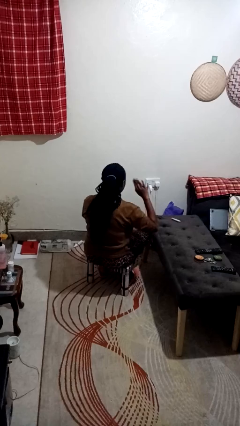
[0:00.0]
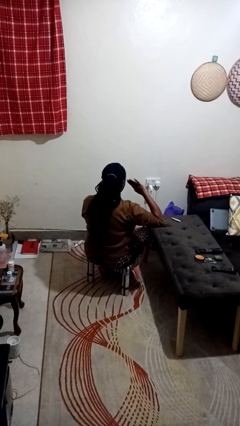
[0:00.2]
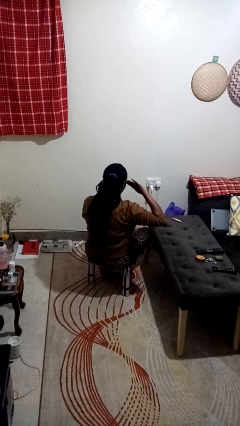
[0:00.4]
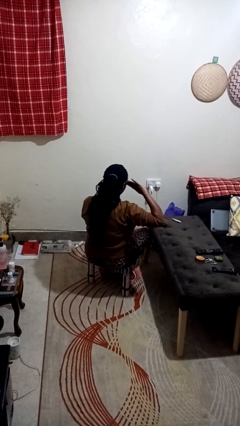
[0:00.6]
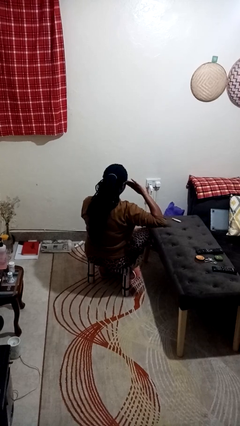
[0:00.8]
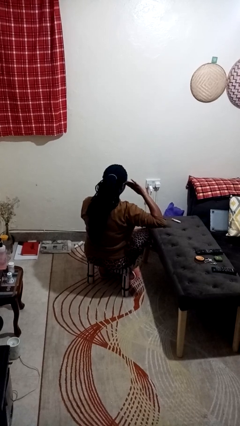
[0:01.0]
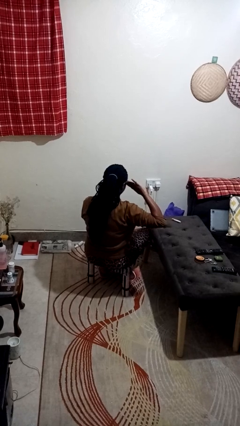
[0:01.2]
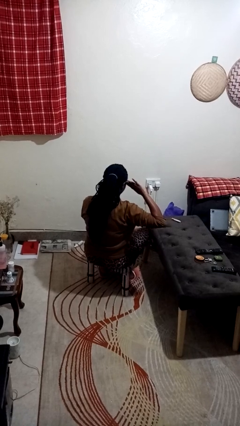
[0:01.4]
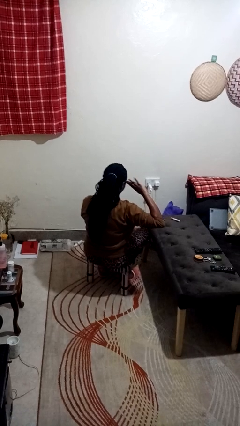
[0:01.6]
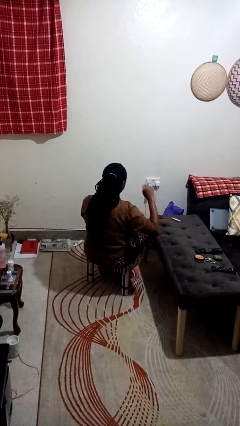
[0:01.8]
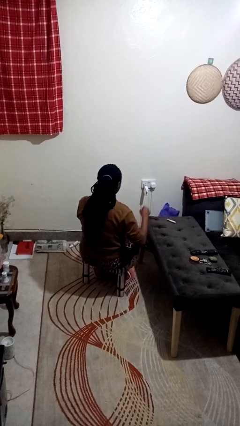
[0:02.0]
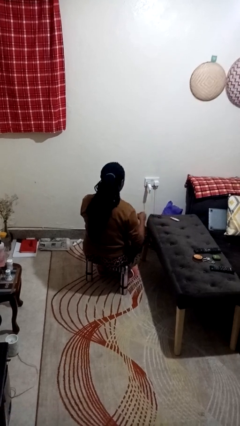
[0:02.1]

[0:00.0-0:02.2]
person salutes

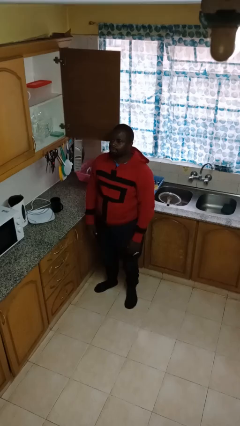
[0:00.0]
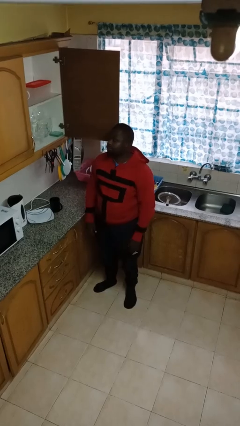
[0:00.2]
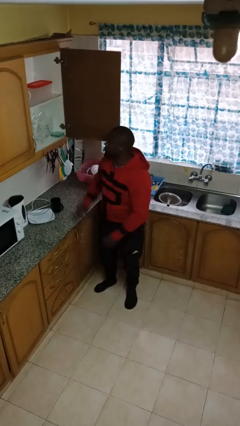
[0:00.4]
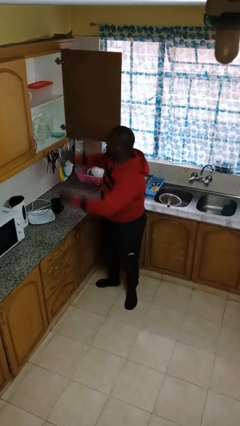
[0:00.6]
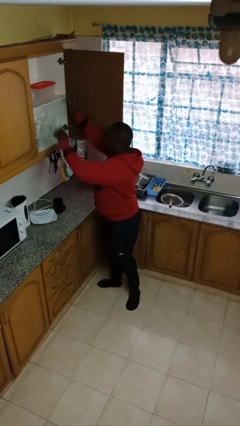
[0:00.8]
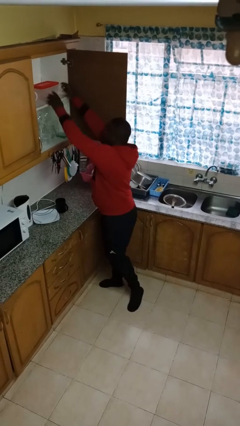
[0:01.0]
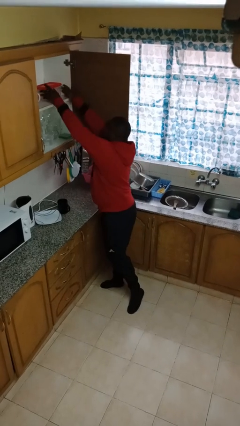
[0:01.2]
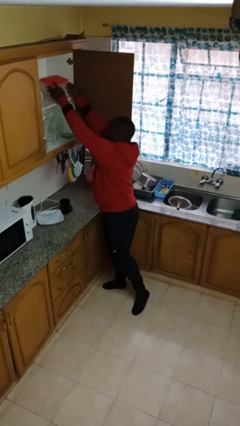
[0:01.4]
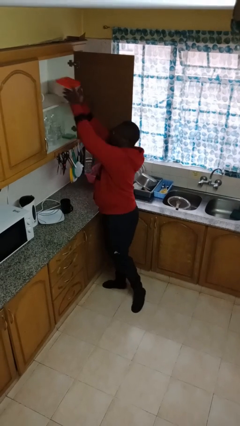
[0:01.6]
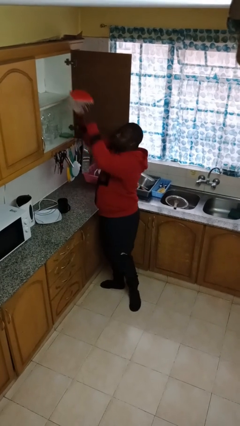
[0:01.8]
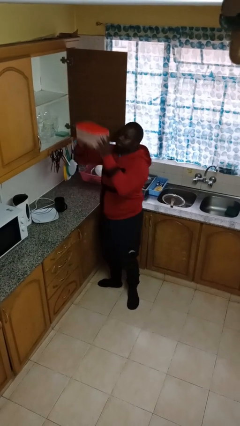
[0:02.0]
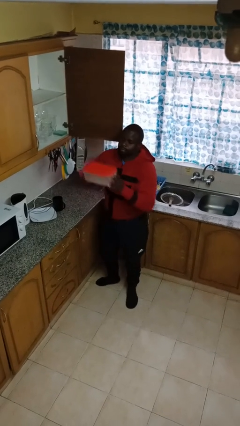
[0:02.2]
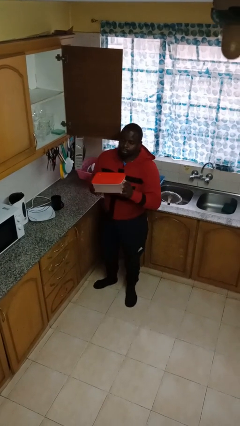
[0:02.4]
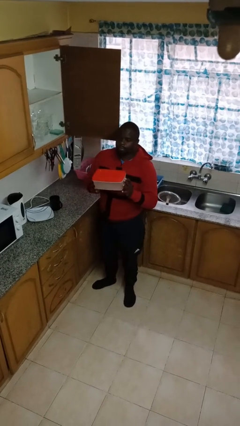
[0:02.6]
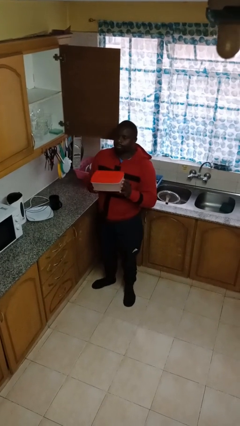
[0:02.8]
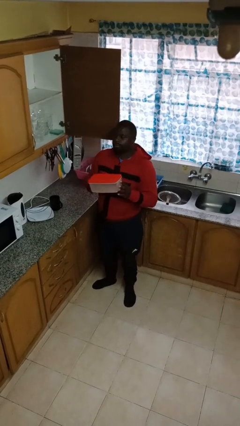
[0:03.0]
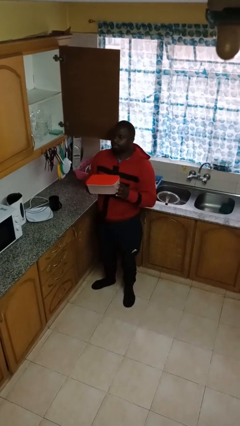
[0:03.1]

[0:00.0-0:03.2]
person picks up object from cabinet

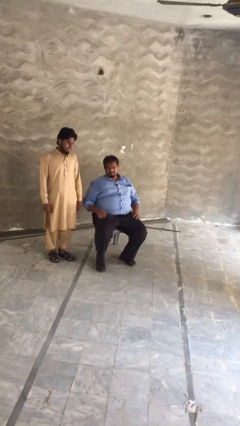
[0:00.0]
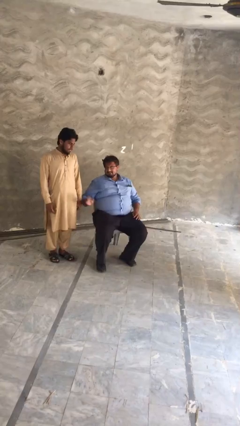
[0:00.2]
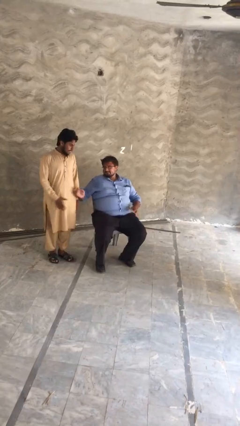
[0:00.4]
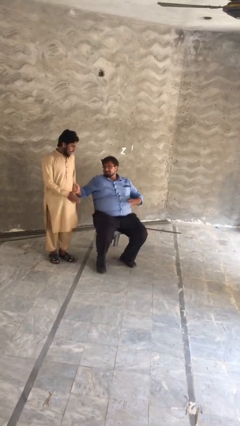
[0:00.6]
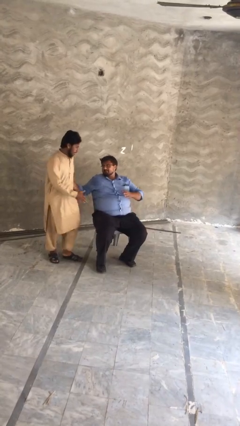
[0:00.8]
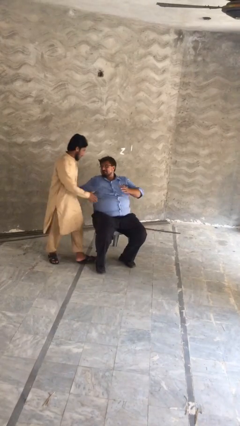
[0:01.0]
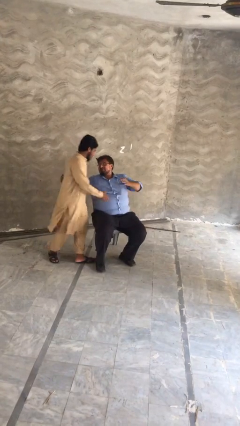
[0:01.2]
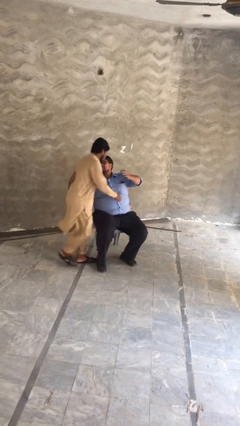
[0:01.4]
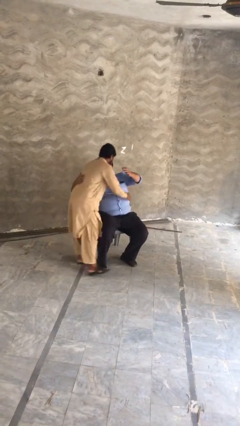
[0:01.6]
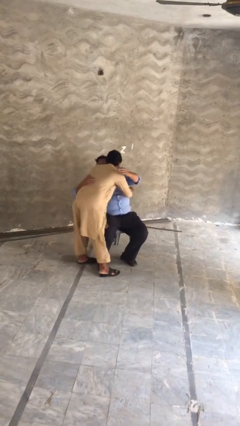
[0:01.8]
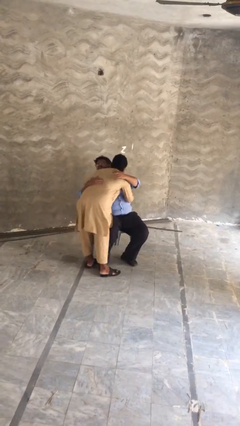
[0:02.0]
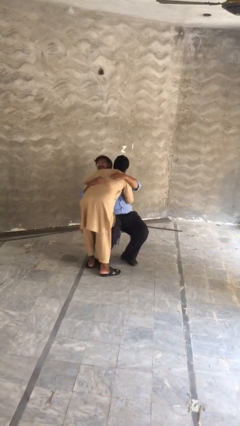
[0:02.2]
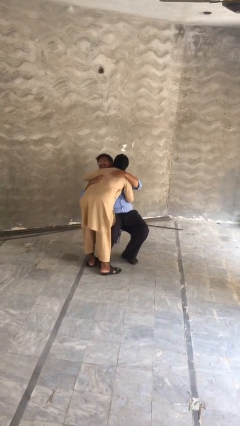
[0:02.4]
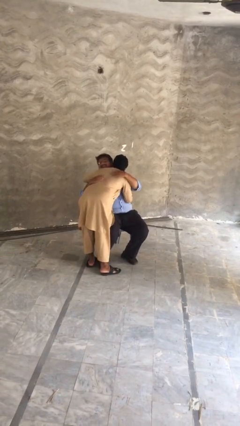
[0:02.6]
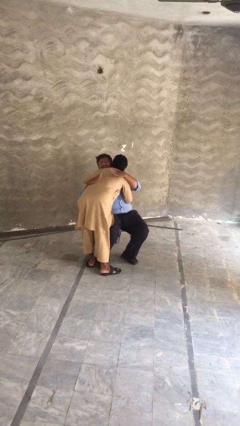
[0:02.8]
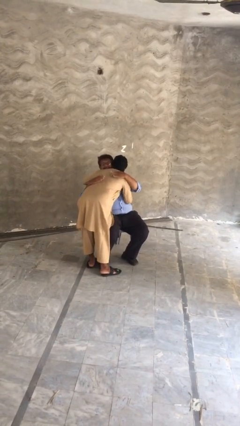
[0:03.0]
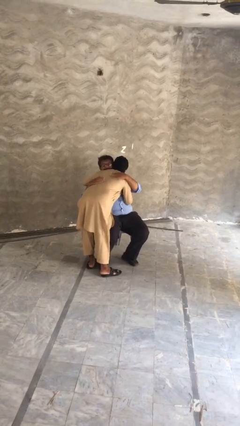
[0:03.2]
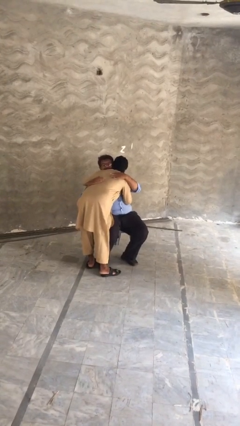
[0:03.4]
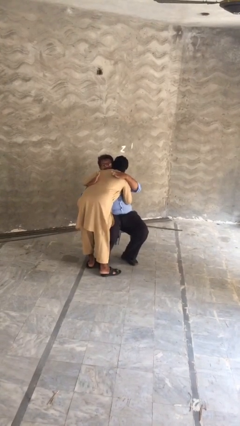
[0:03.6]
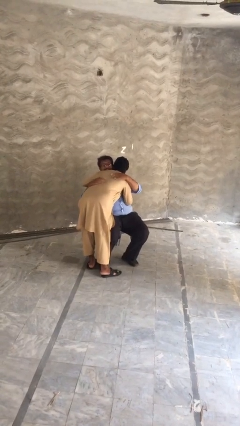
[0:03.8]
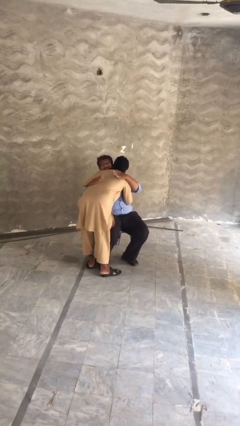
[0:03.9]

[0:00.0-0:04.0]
person embraces person

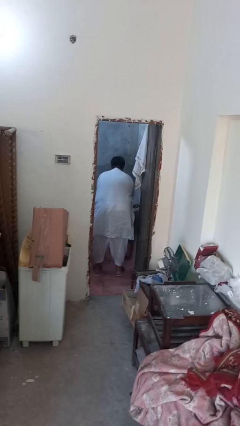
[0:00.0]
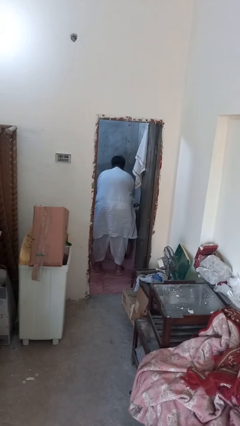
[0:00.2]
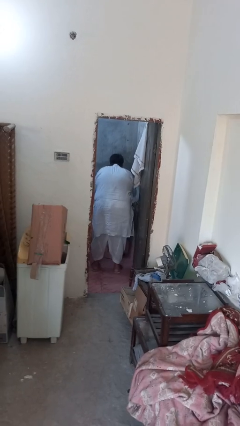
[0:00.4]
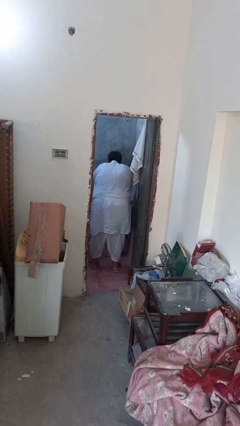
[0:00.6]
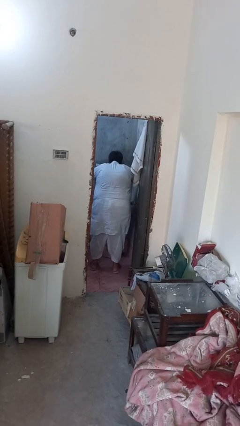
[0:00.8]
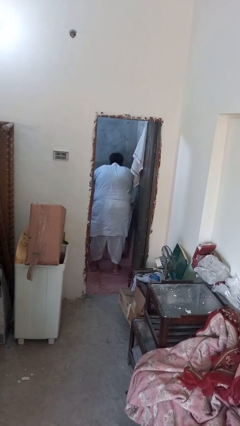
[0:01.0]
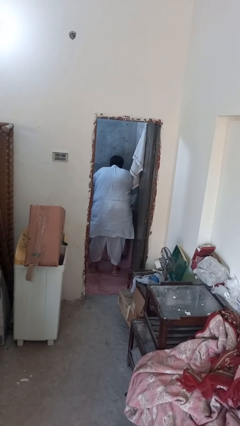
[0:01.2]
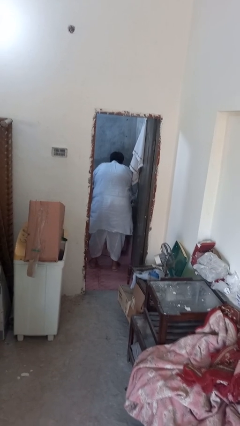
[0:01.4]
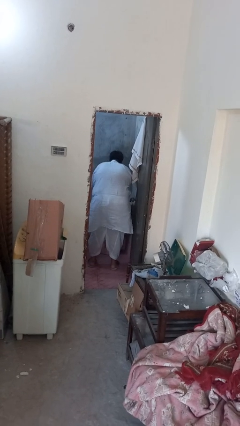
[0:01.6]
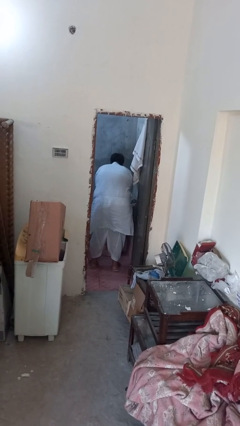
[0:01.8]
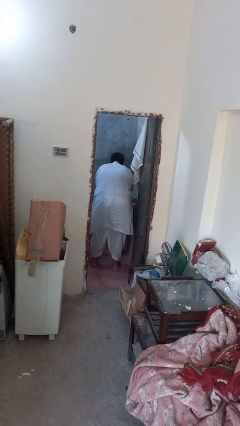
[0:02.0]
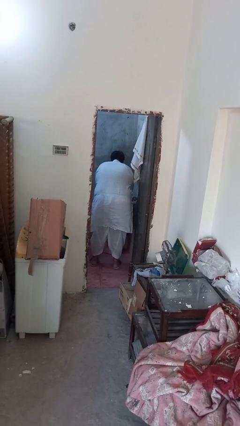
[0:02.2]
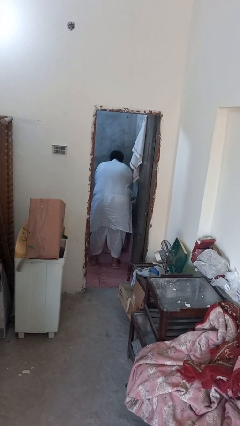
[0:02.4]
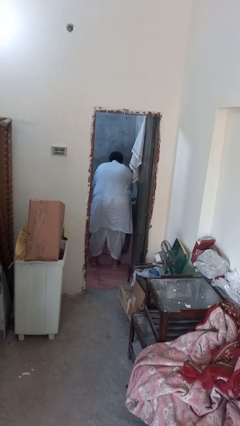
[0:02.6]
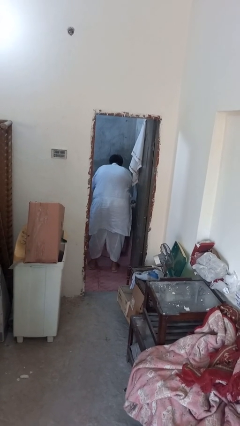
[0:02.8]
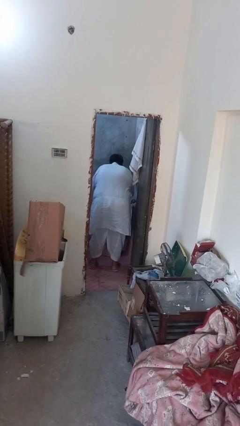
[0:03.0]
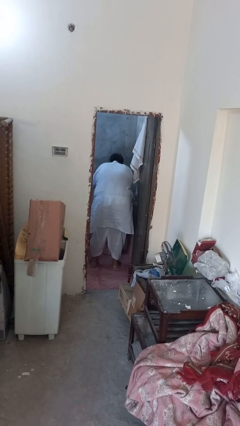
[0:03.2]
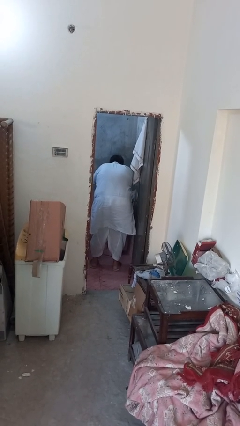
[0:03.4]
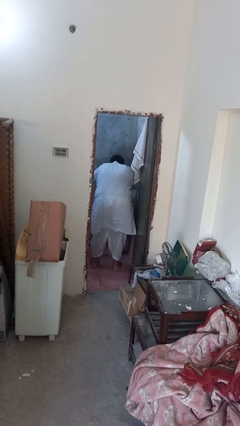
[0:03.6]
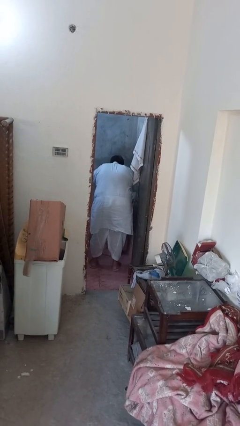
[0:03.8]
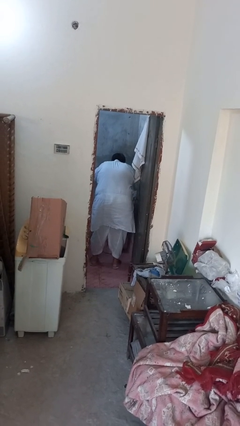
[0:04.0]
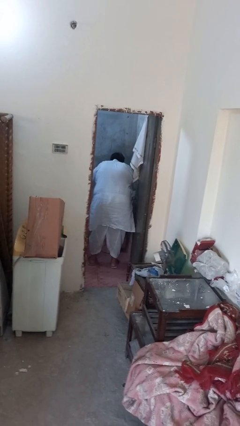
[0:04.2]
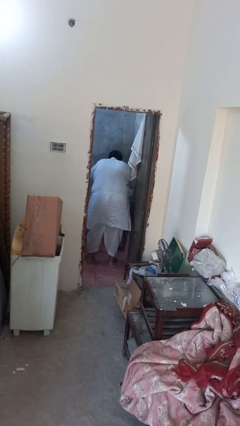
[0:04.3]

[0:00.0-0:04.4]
person washes face

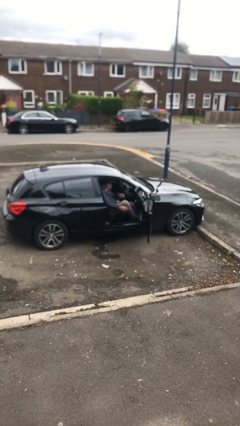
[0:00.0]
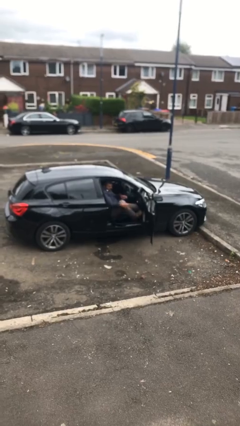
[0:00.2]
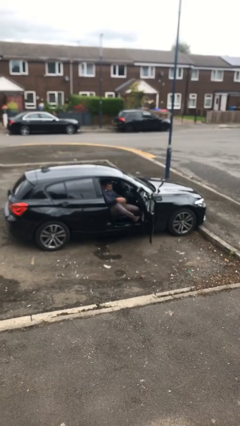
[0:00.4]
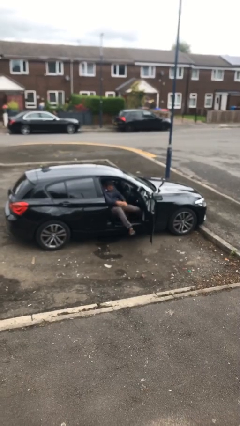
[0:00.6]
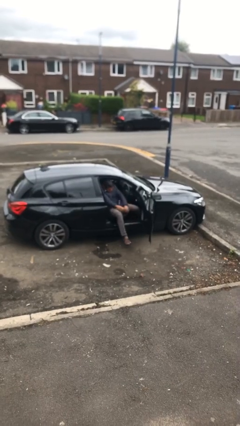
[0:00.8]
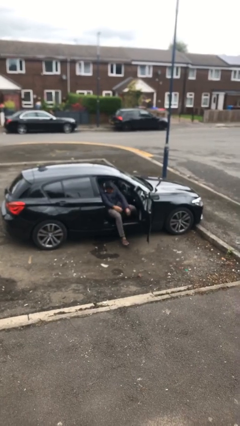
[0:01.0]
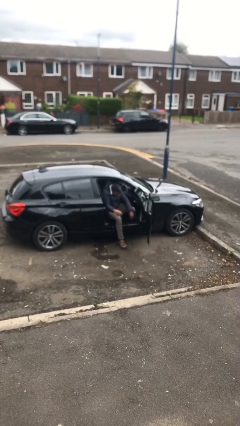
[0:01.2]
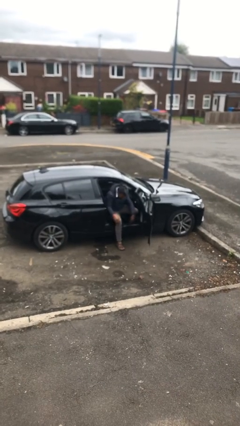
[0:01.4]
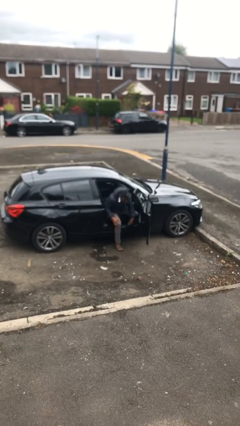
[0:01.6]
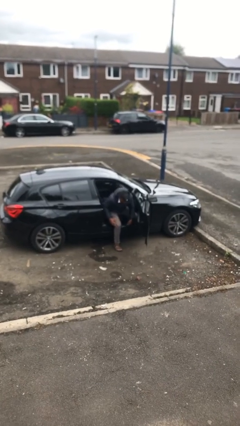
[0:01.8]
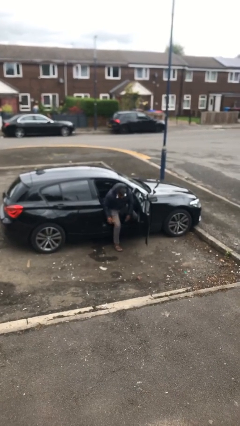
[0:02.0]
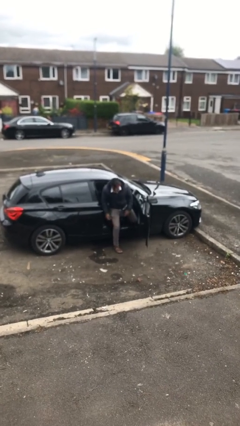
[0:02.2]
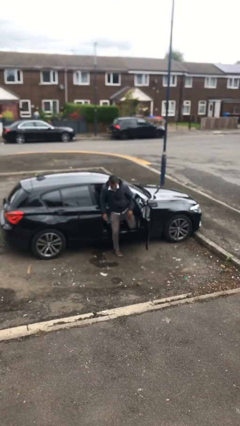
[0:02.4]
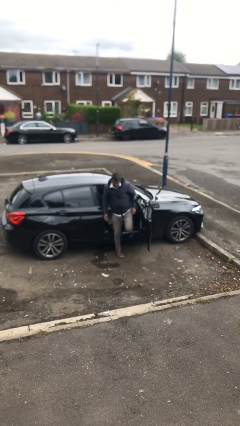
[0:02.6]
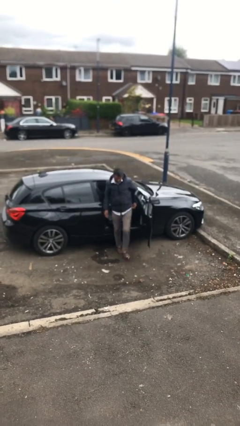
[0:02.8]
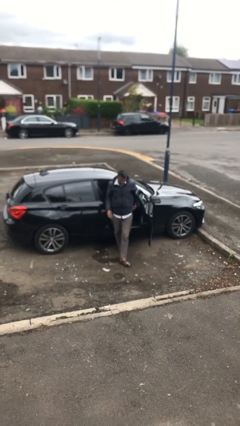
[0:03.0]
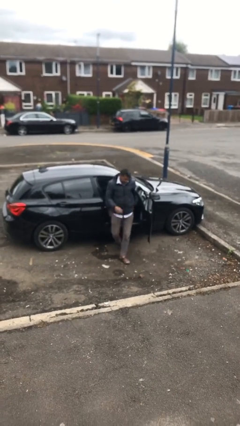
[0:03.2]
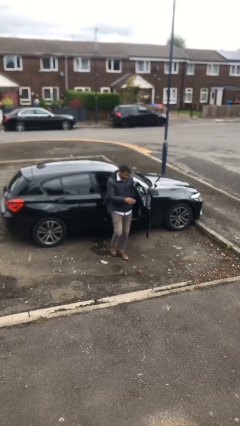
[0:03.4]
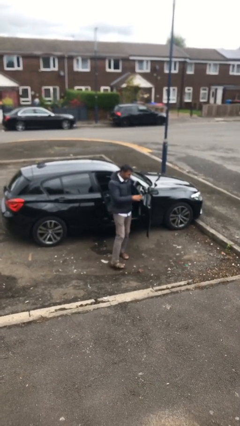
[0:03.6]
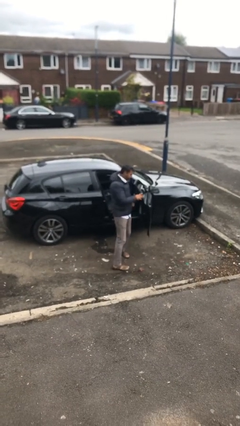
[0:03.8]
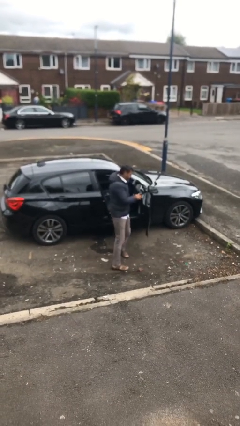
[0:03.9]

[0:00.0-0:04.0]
person exits car
